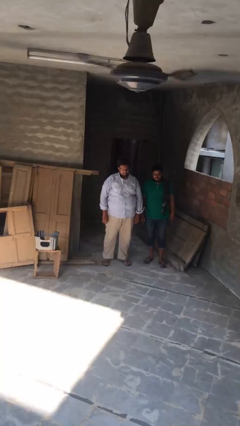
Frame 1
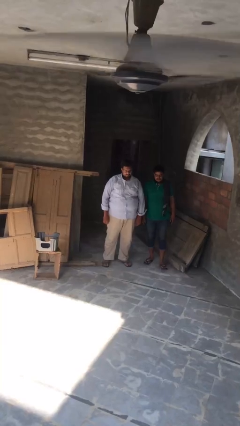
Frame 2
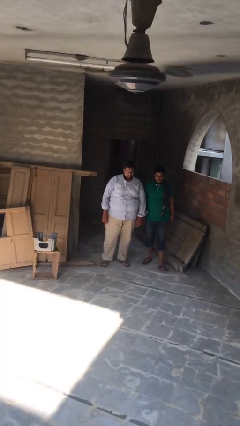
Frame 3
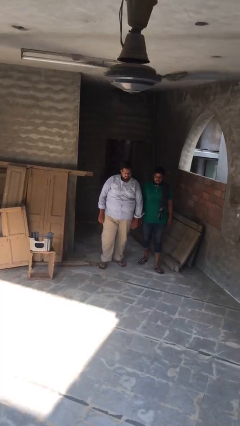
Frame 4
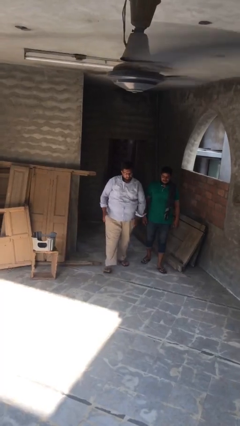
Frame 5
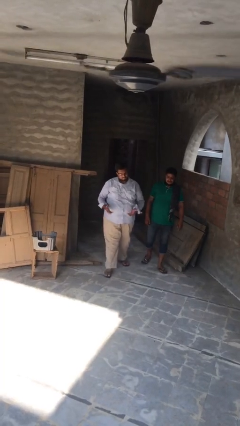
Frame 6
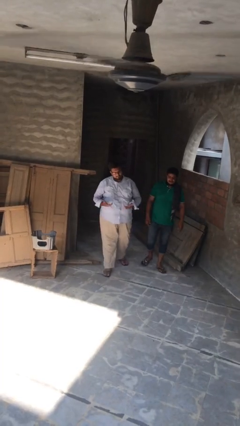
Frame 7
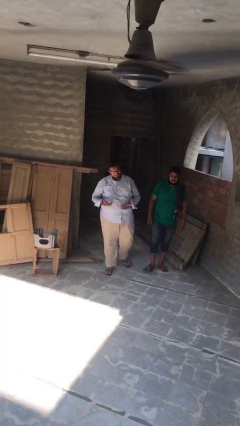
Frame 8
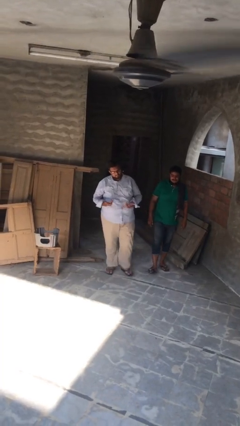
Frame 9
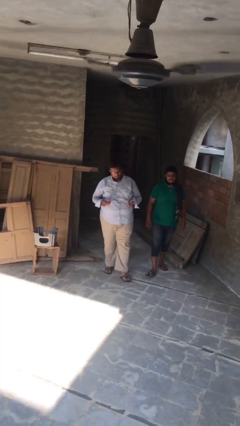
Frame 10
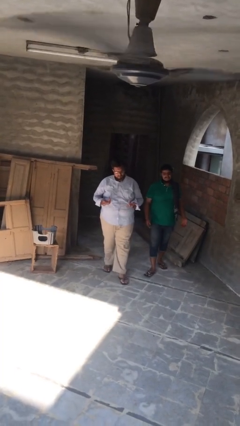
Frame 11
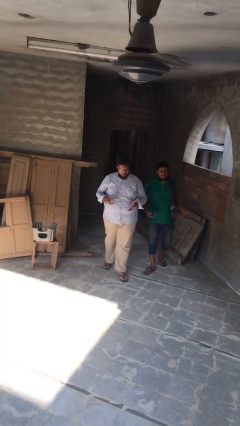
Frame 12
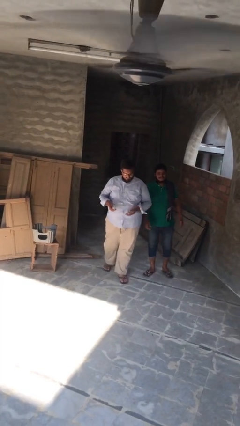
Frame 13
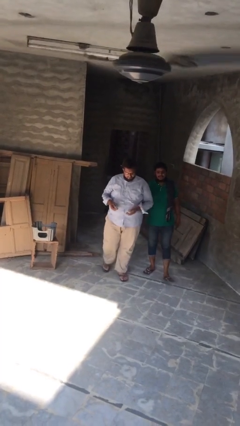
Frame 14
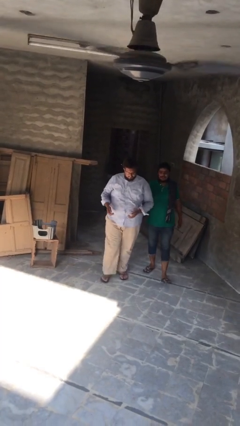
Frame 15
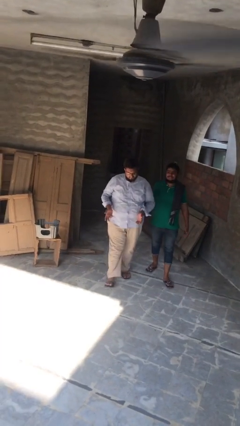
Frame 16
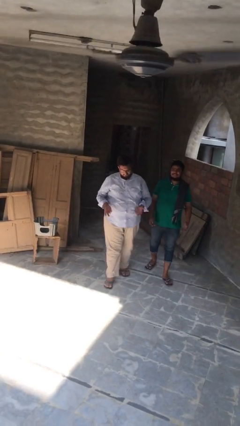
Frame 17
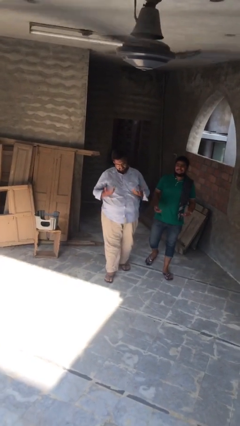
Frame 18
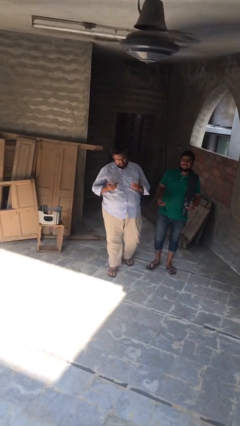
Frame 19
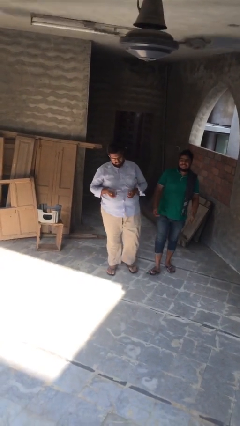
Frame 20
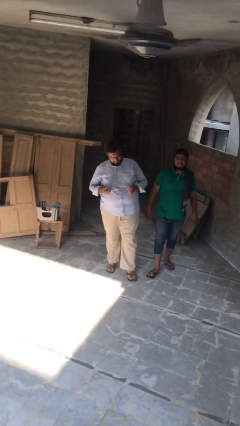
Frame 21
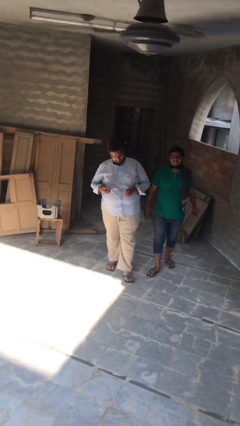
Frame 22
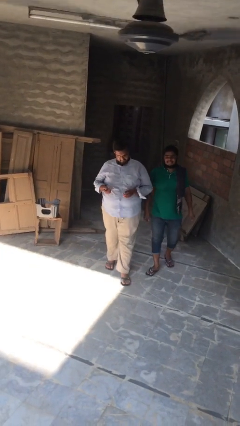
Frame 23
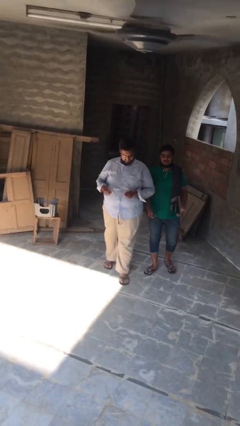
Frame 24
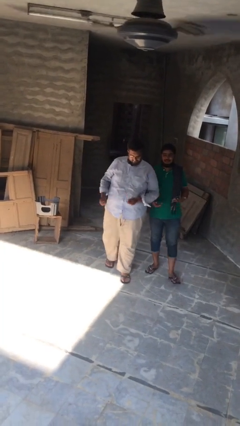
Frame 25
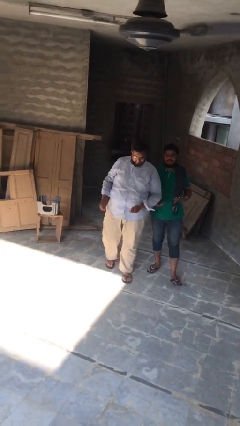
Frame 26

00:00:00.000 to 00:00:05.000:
person talks to person

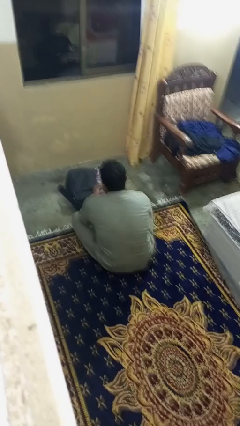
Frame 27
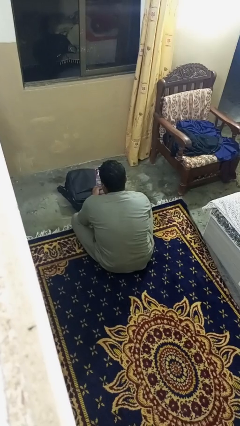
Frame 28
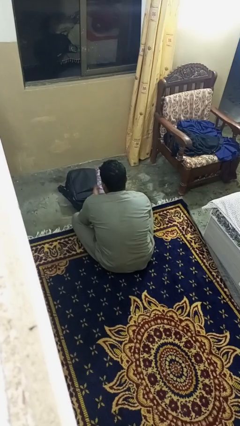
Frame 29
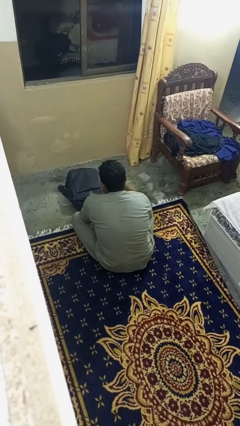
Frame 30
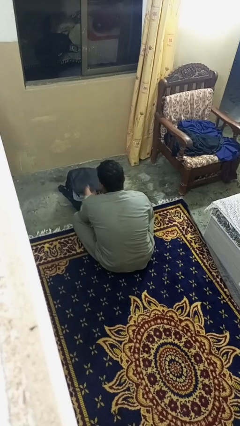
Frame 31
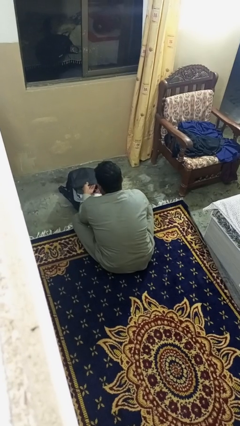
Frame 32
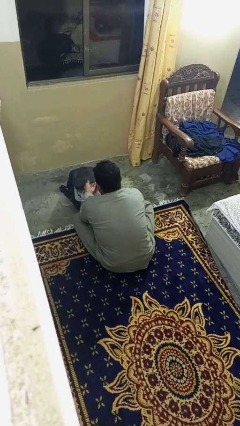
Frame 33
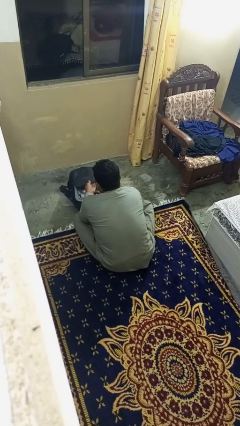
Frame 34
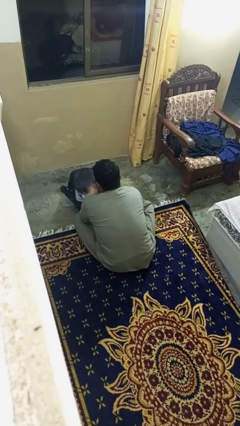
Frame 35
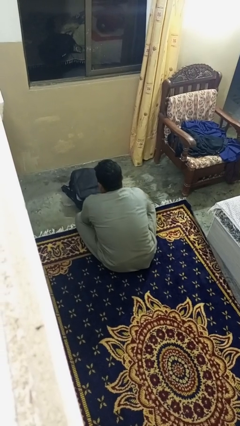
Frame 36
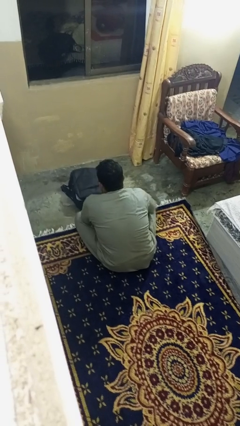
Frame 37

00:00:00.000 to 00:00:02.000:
person puts object into bag

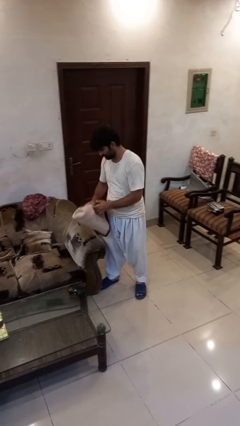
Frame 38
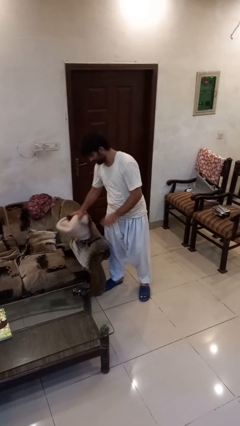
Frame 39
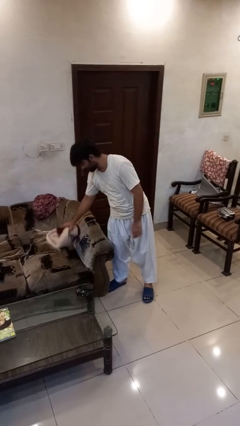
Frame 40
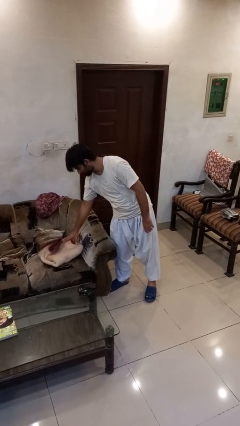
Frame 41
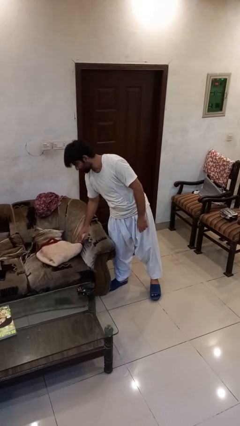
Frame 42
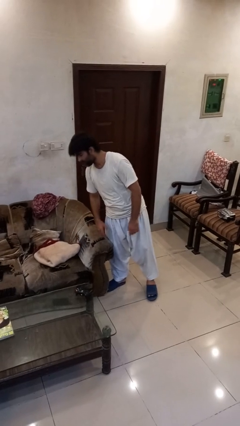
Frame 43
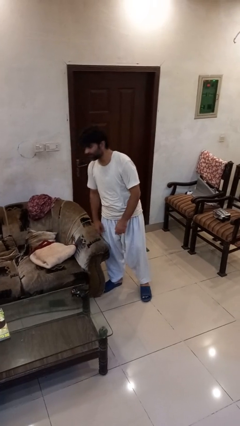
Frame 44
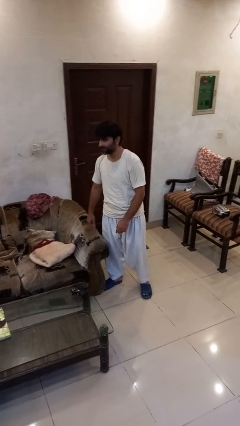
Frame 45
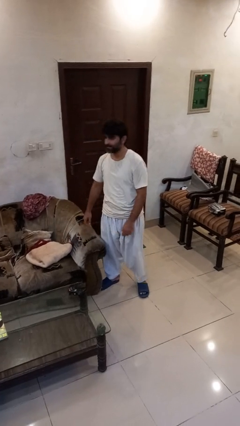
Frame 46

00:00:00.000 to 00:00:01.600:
person puts down object on couch

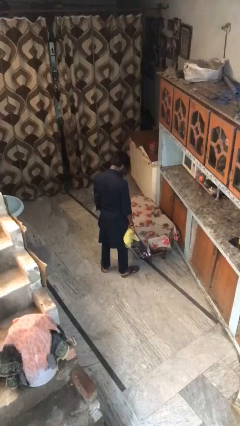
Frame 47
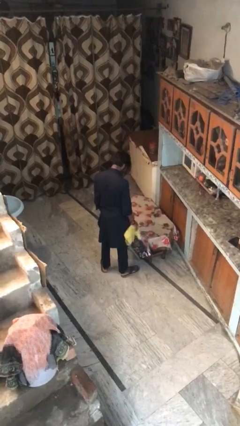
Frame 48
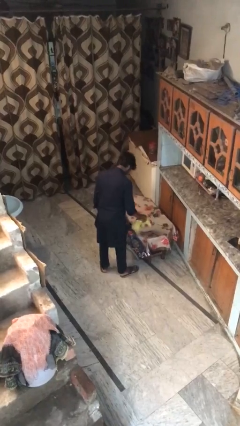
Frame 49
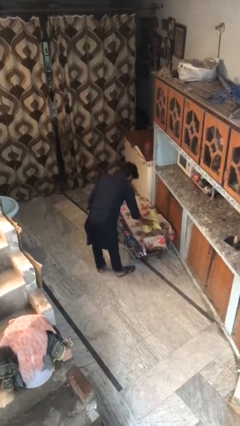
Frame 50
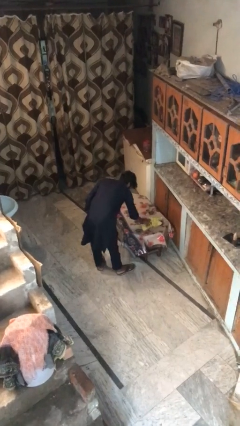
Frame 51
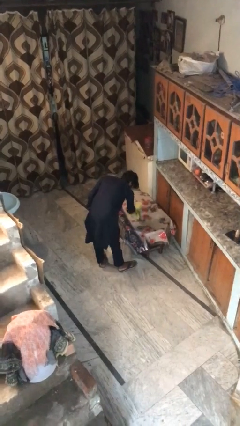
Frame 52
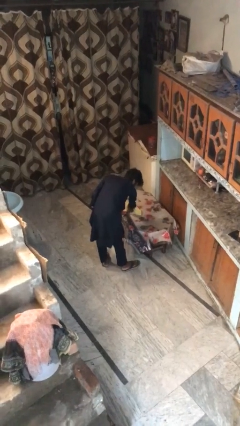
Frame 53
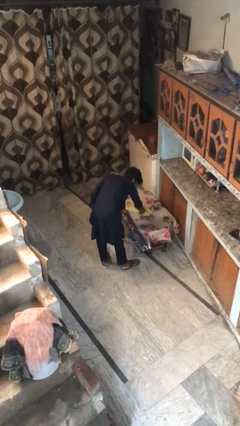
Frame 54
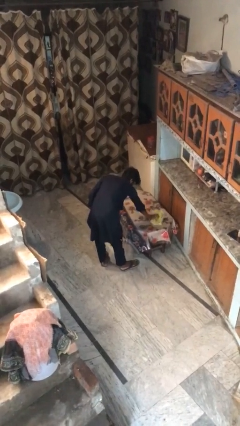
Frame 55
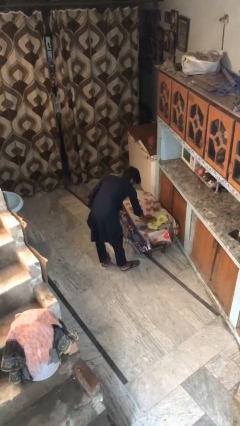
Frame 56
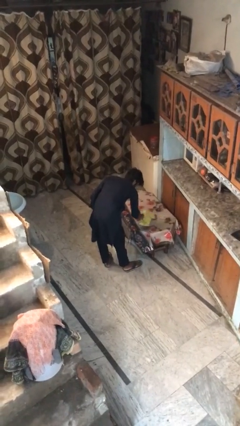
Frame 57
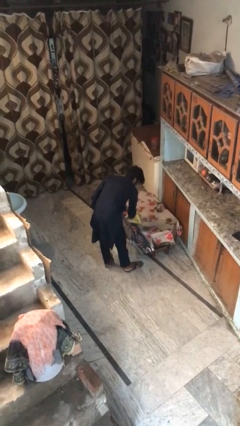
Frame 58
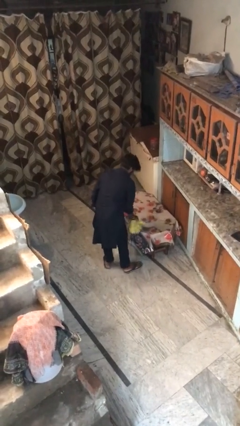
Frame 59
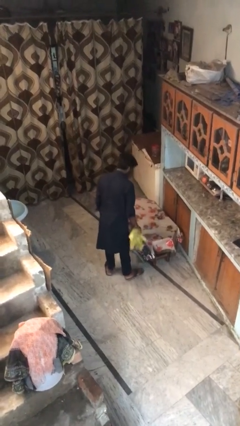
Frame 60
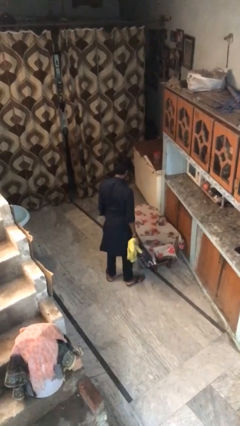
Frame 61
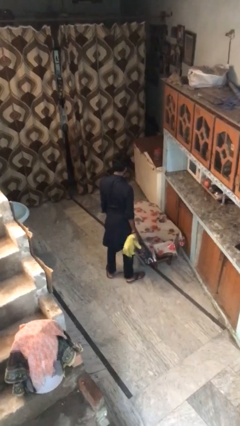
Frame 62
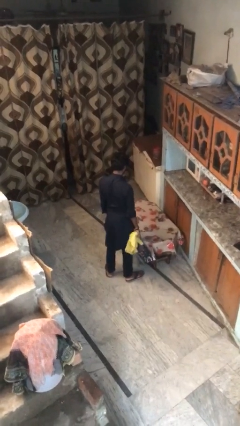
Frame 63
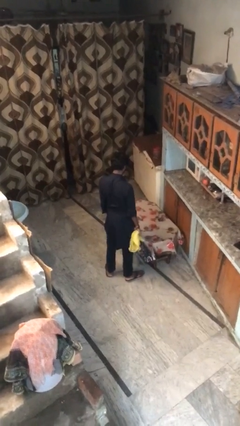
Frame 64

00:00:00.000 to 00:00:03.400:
person cleans table with rag

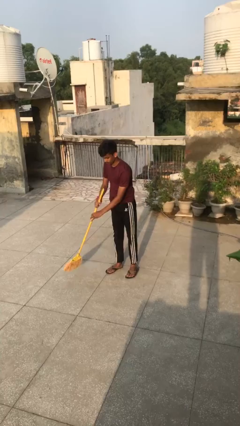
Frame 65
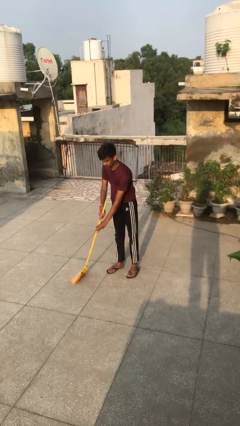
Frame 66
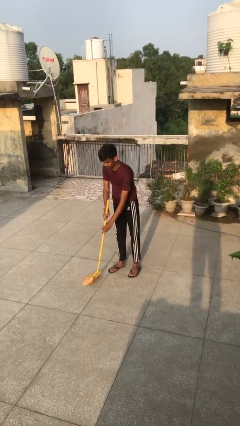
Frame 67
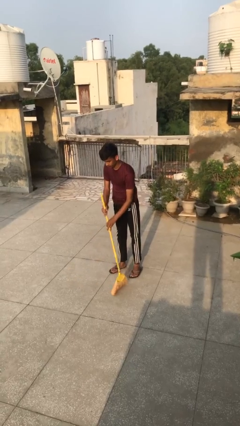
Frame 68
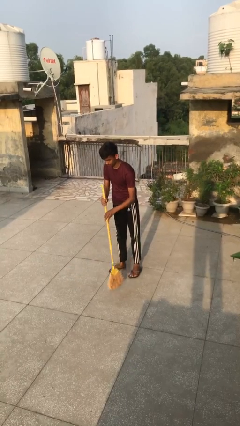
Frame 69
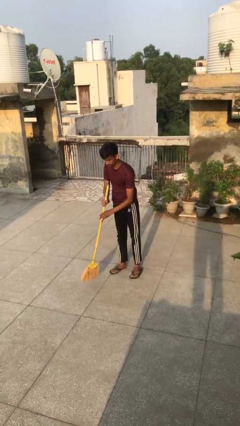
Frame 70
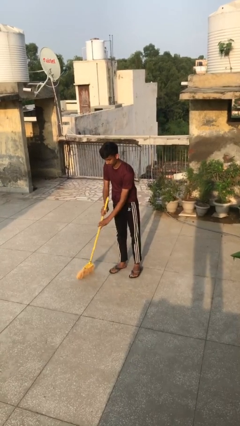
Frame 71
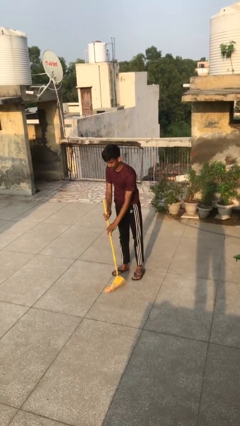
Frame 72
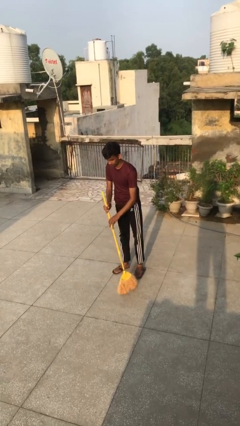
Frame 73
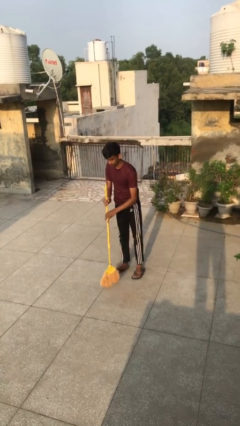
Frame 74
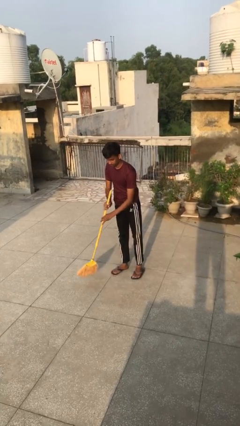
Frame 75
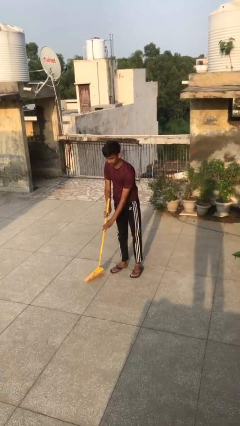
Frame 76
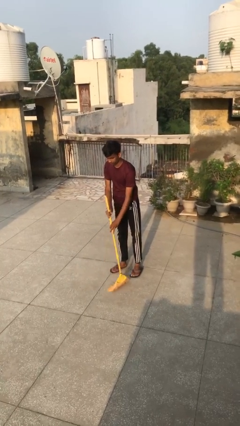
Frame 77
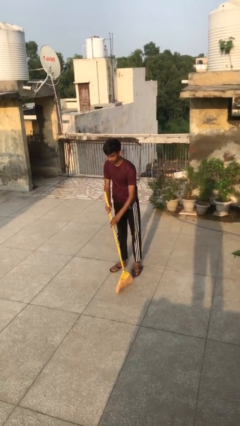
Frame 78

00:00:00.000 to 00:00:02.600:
person sweeps floor

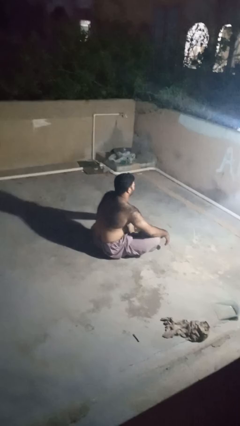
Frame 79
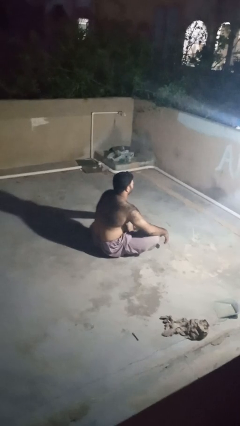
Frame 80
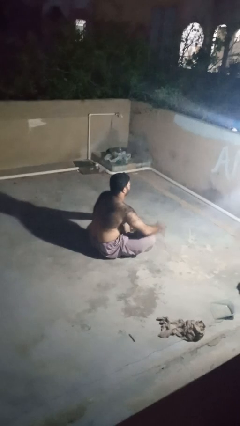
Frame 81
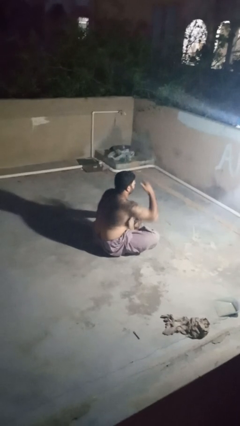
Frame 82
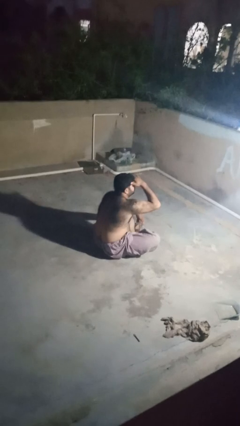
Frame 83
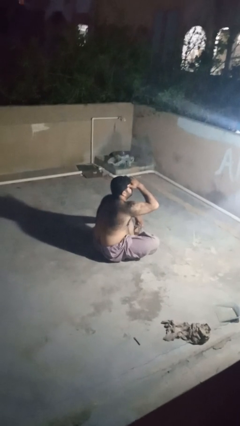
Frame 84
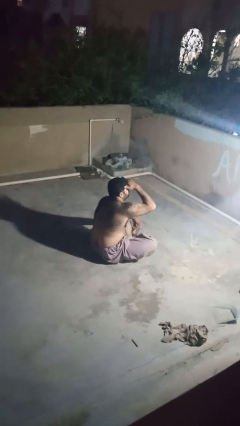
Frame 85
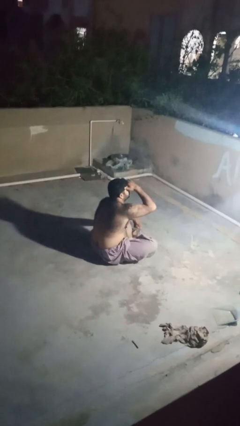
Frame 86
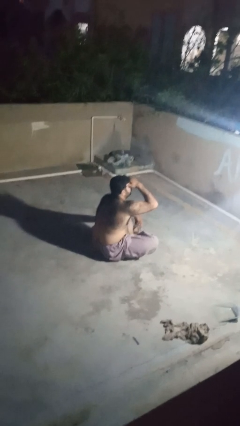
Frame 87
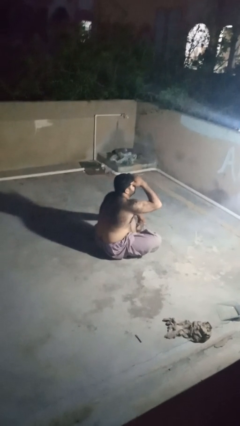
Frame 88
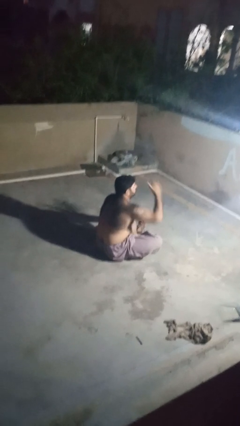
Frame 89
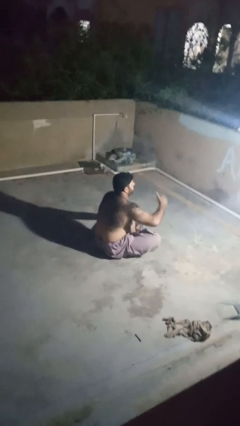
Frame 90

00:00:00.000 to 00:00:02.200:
person shades eyes

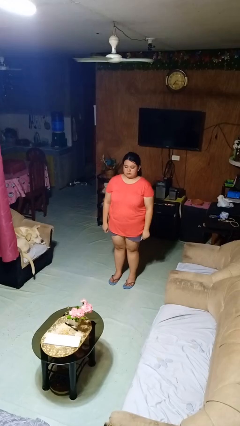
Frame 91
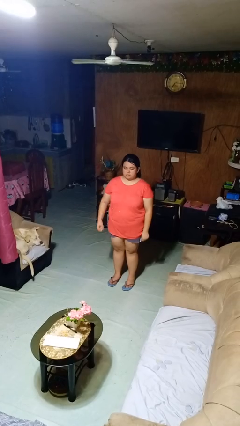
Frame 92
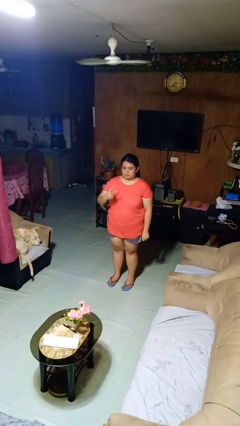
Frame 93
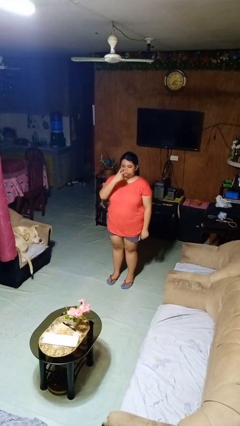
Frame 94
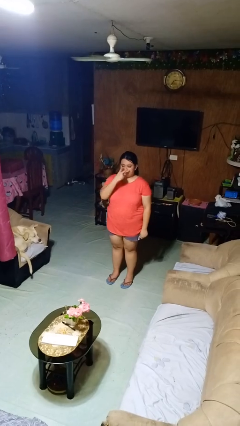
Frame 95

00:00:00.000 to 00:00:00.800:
person gestures watch closely
